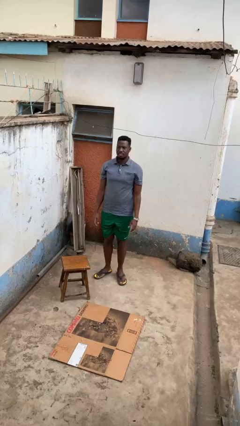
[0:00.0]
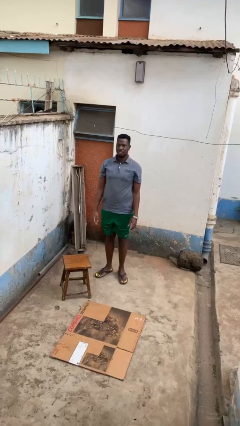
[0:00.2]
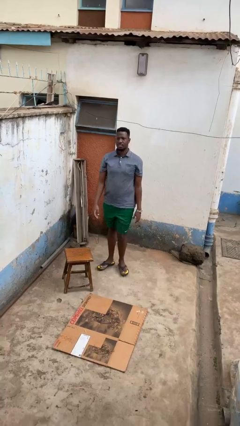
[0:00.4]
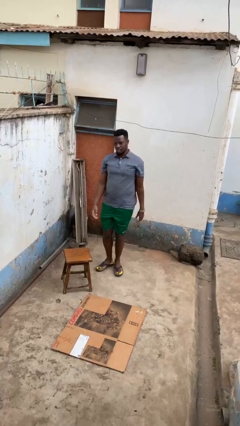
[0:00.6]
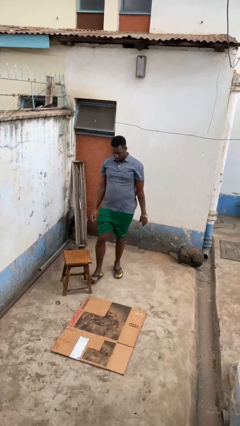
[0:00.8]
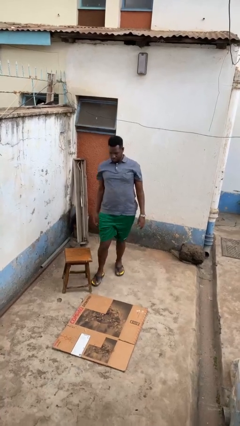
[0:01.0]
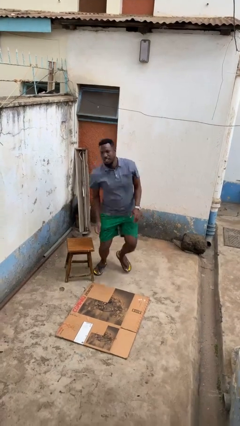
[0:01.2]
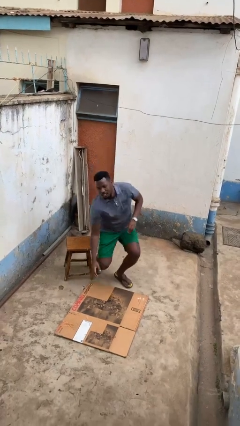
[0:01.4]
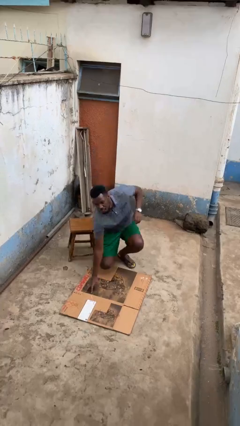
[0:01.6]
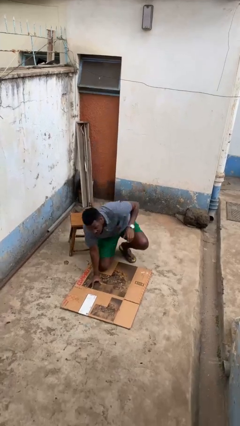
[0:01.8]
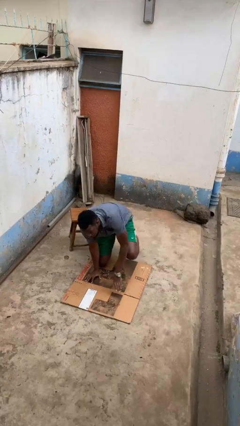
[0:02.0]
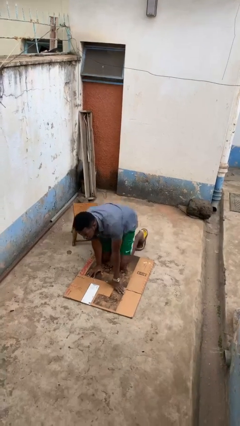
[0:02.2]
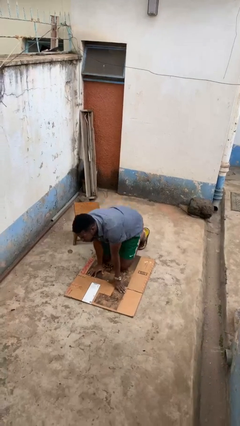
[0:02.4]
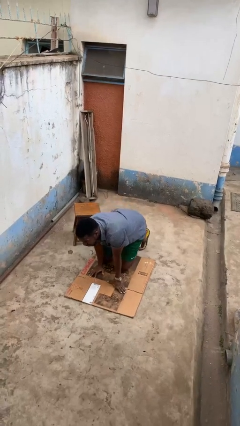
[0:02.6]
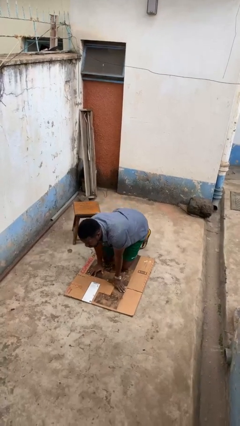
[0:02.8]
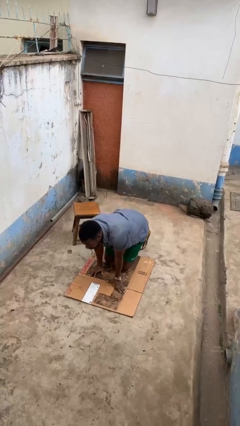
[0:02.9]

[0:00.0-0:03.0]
person trips on object on floor

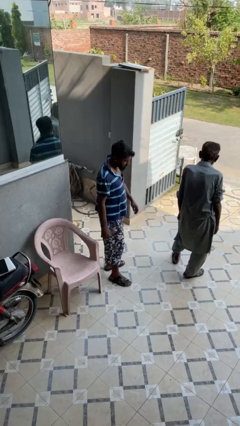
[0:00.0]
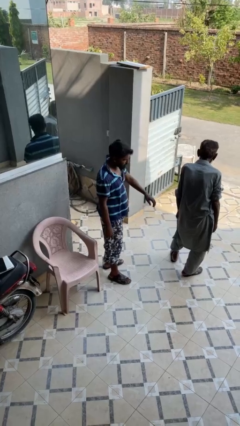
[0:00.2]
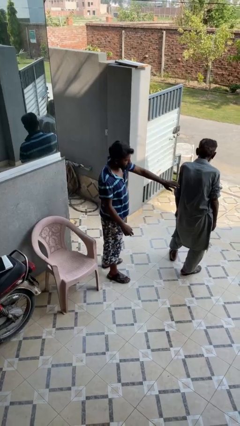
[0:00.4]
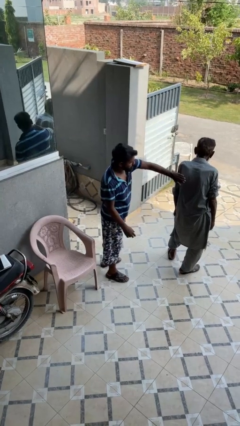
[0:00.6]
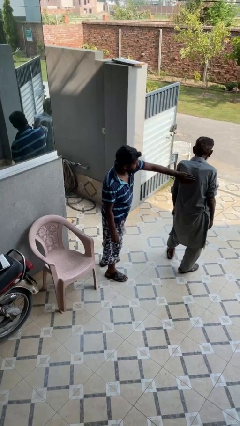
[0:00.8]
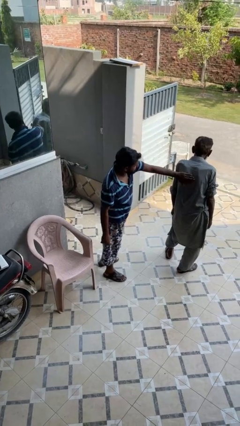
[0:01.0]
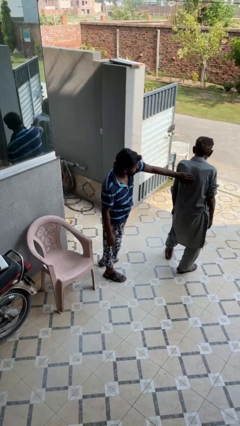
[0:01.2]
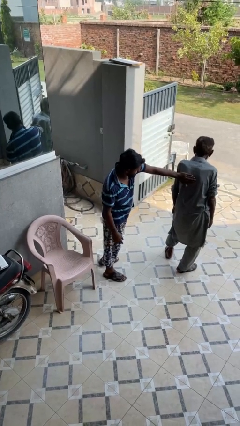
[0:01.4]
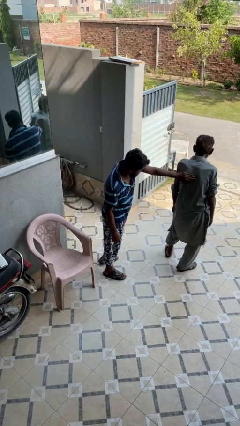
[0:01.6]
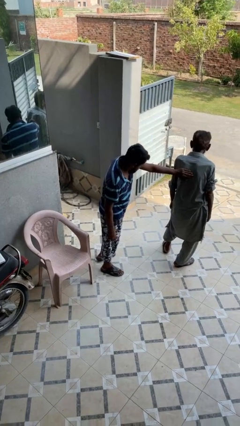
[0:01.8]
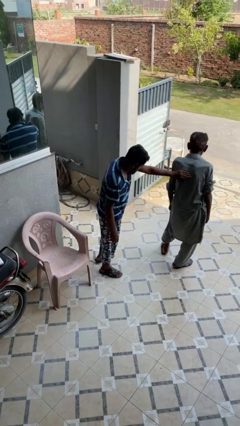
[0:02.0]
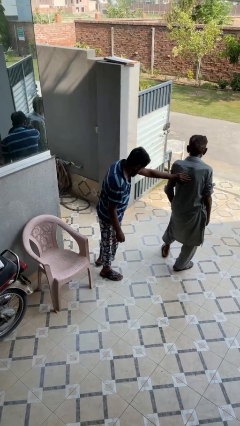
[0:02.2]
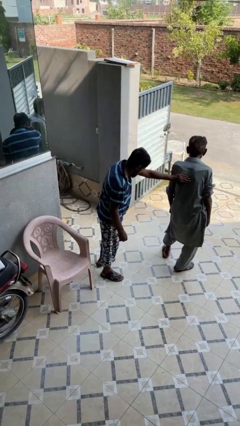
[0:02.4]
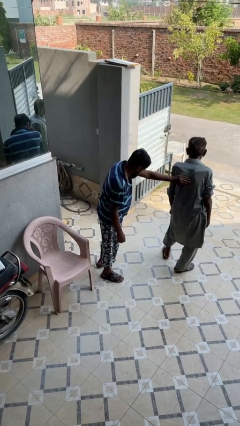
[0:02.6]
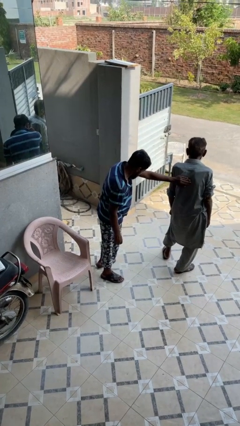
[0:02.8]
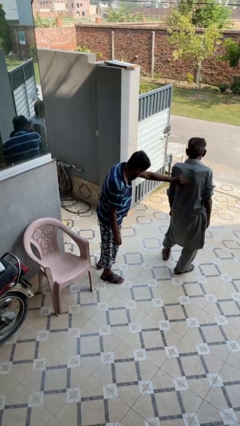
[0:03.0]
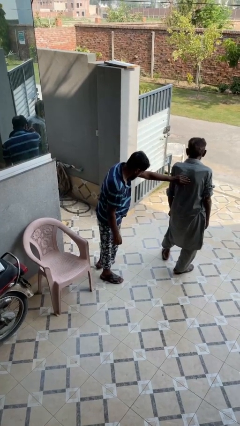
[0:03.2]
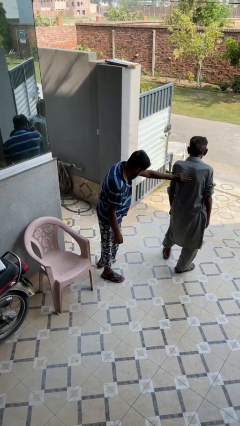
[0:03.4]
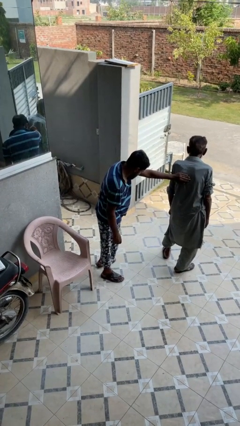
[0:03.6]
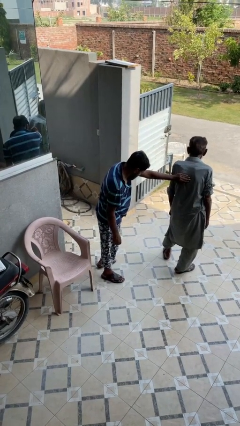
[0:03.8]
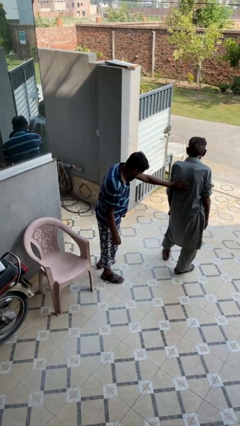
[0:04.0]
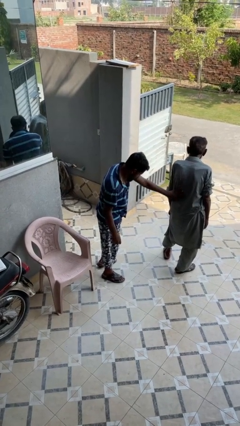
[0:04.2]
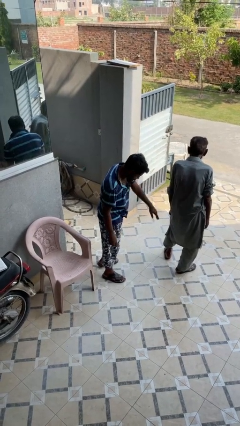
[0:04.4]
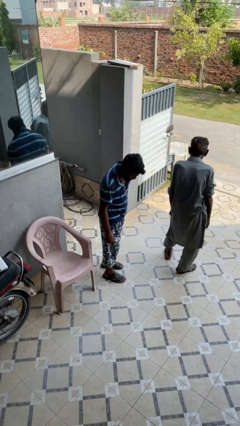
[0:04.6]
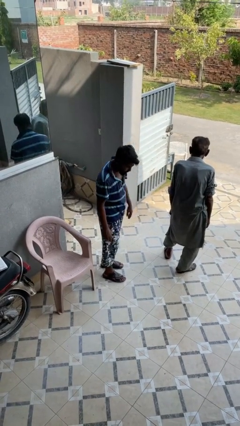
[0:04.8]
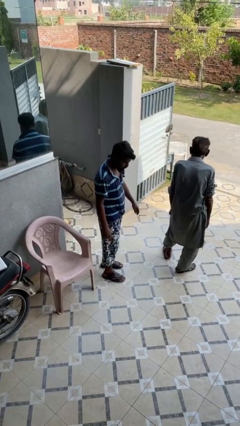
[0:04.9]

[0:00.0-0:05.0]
person touches back of person

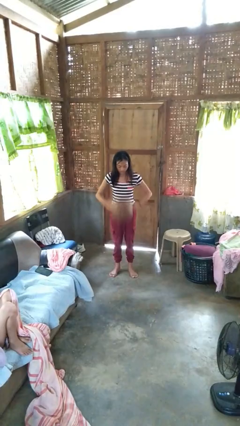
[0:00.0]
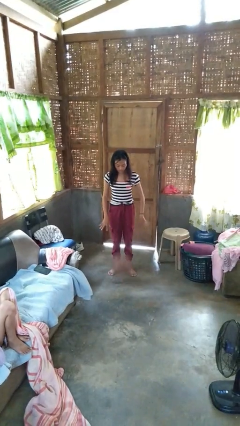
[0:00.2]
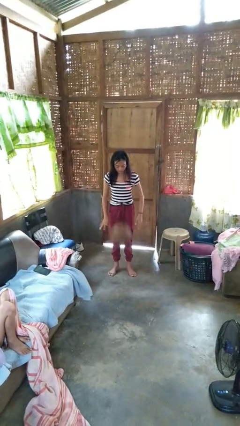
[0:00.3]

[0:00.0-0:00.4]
person bounces ball on floor

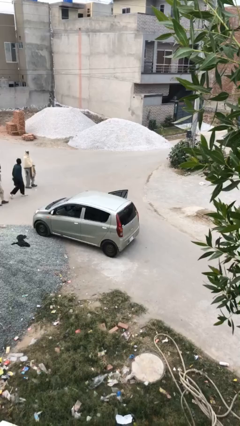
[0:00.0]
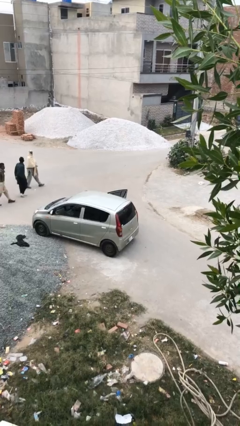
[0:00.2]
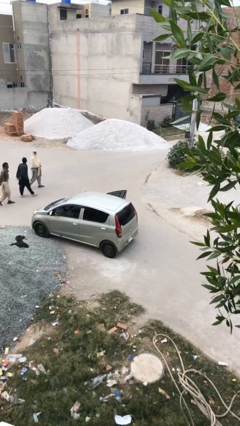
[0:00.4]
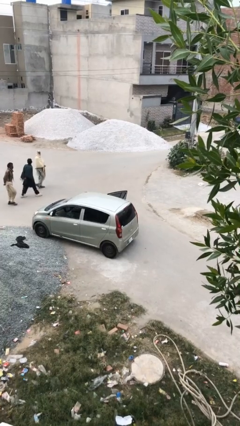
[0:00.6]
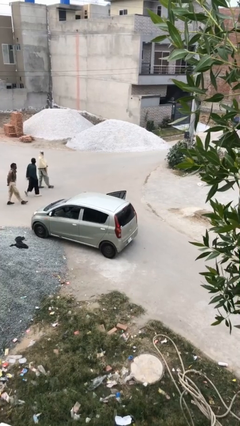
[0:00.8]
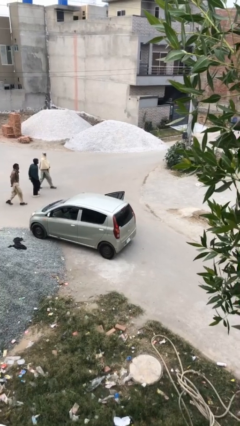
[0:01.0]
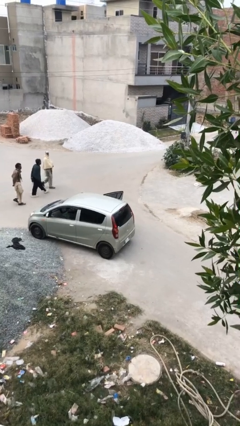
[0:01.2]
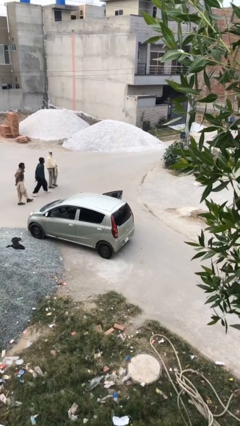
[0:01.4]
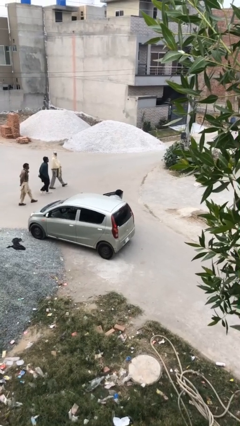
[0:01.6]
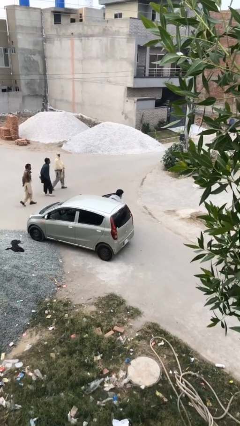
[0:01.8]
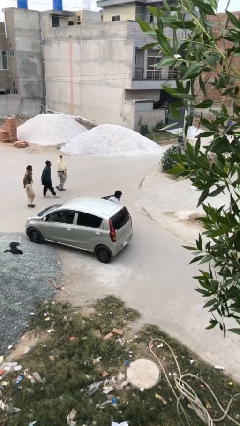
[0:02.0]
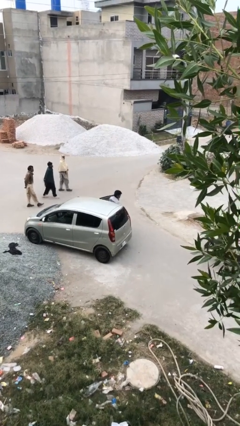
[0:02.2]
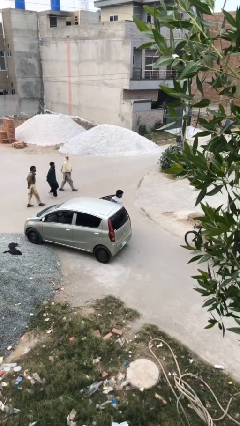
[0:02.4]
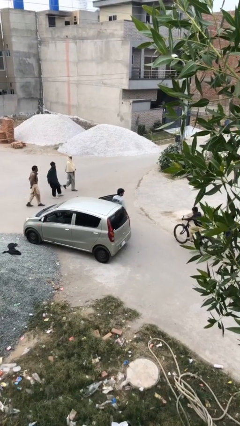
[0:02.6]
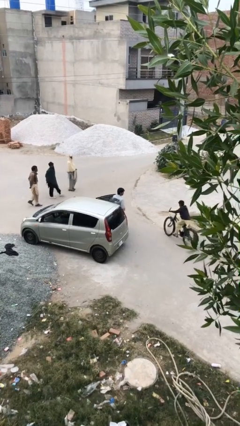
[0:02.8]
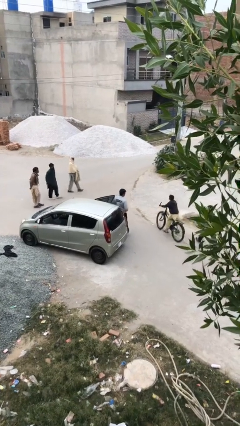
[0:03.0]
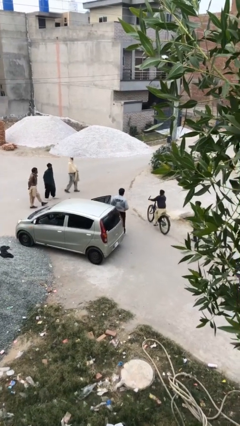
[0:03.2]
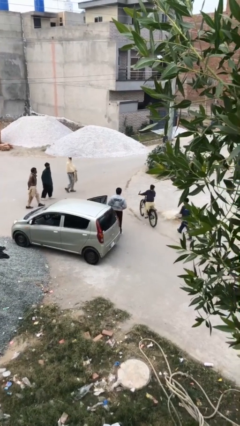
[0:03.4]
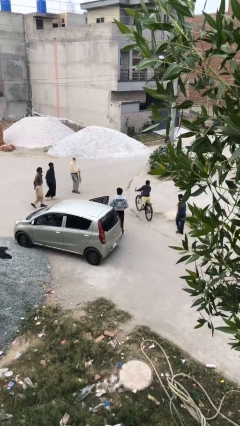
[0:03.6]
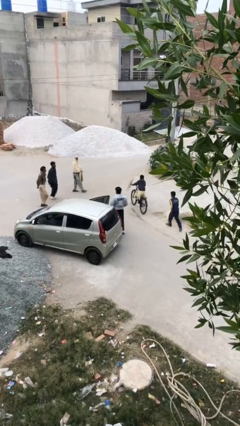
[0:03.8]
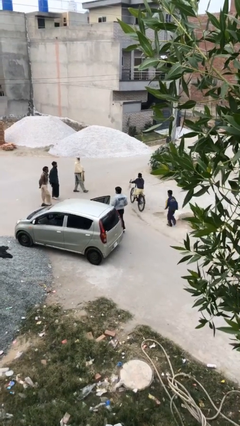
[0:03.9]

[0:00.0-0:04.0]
person exits car

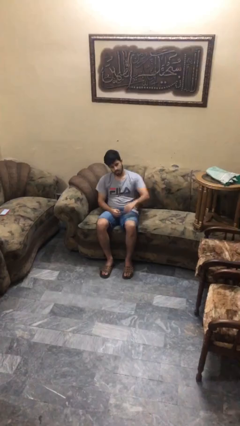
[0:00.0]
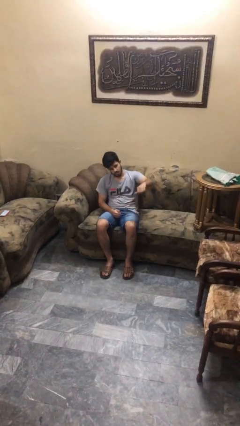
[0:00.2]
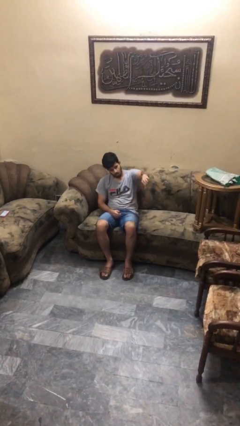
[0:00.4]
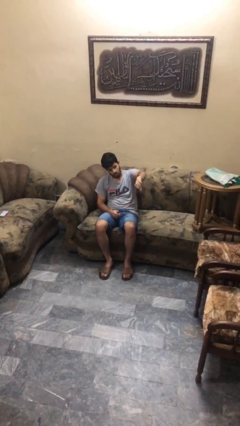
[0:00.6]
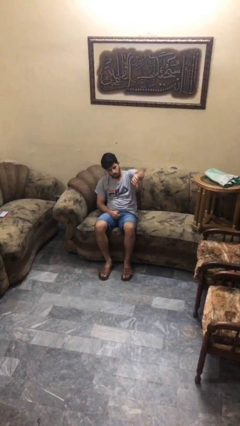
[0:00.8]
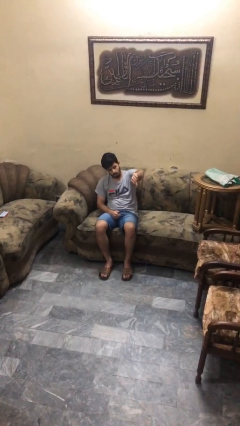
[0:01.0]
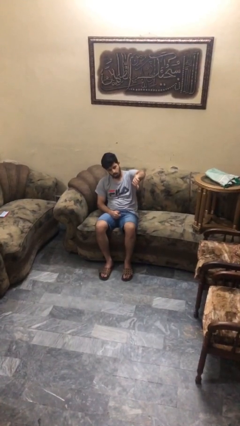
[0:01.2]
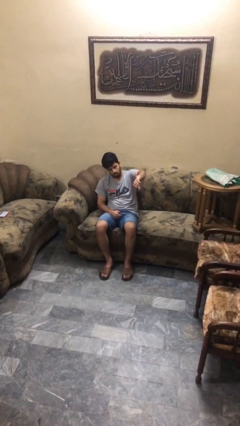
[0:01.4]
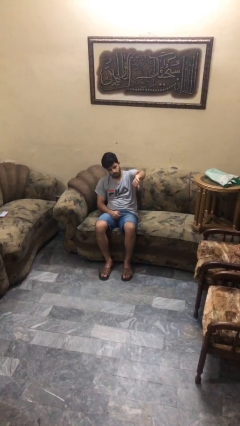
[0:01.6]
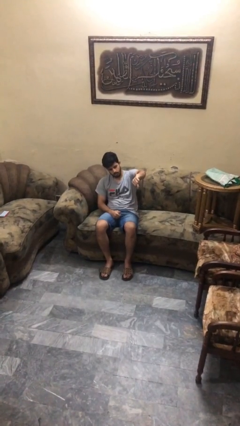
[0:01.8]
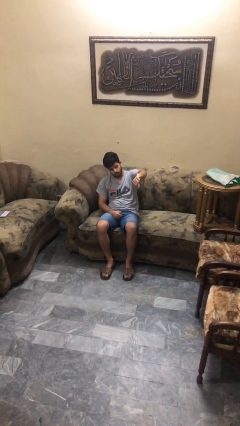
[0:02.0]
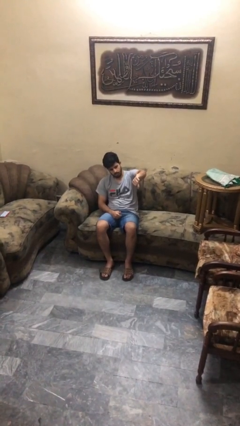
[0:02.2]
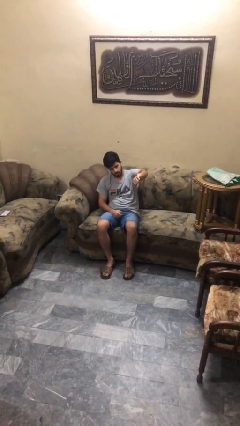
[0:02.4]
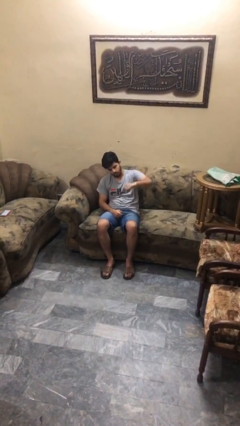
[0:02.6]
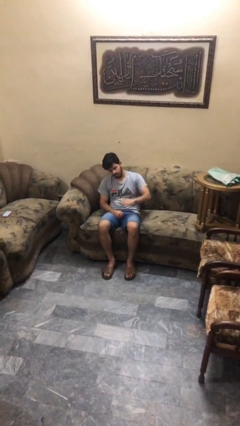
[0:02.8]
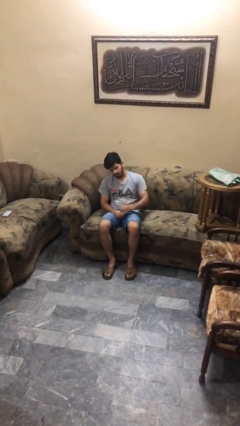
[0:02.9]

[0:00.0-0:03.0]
person gestures thumbs down

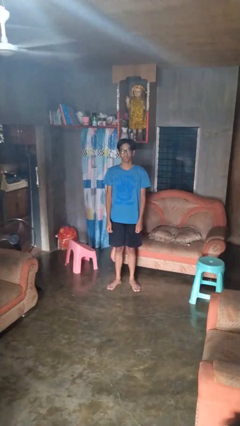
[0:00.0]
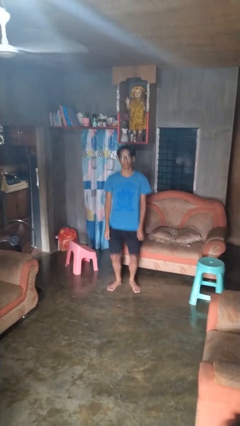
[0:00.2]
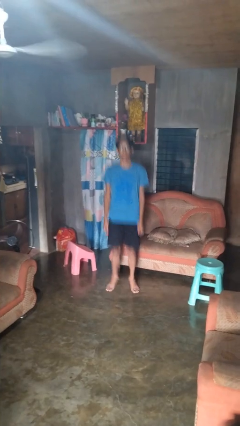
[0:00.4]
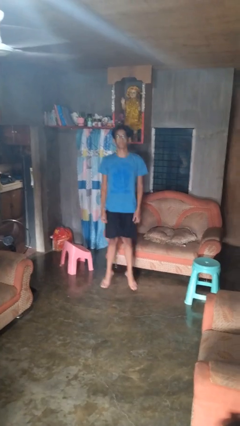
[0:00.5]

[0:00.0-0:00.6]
person jumps

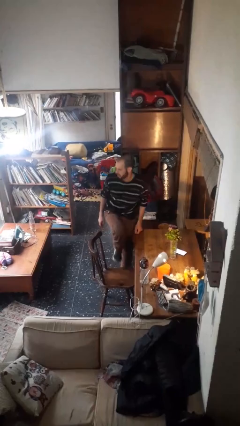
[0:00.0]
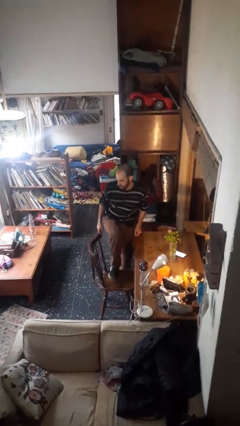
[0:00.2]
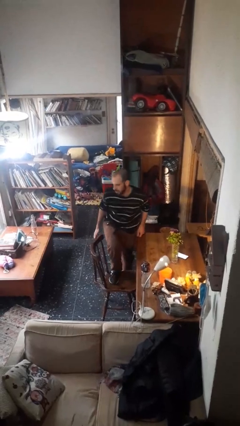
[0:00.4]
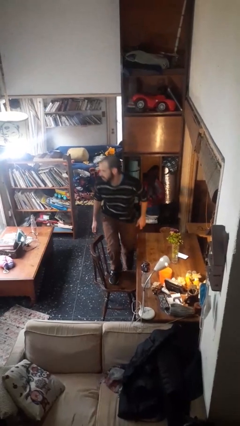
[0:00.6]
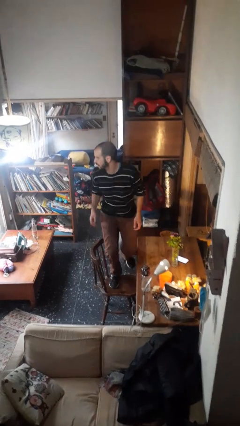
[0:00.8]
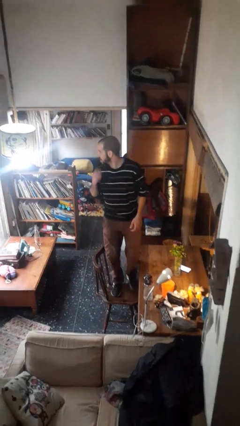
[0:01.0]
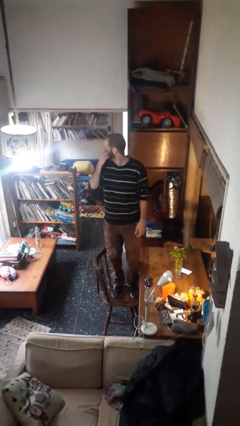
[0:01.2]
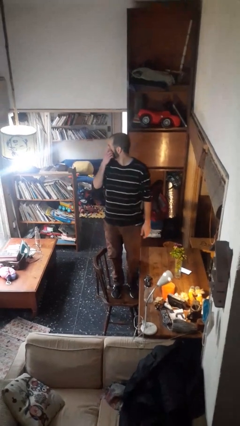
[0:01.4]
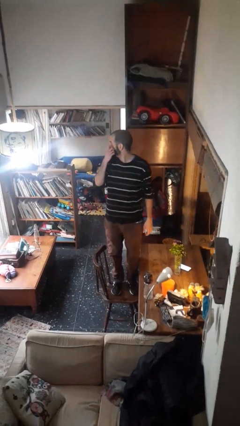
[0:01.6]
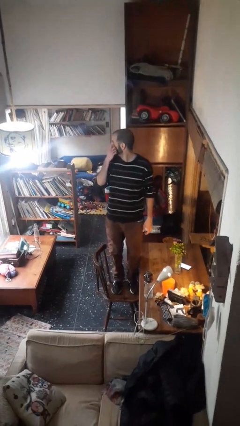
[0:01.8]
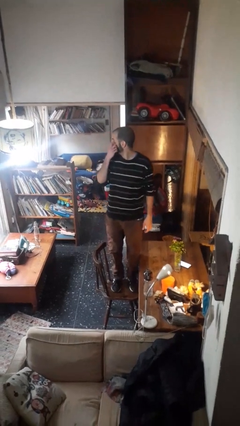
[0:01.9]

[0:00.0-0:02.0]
person climbs on chair
